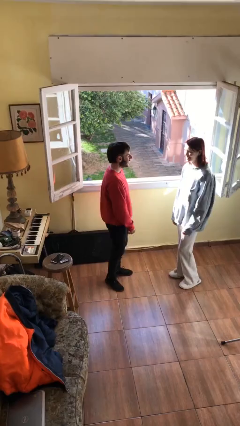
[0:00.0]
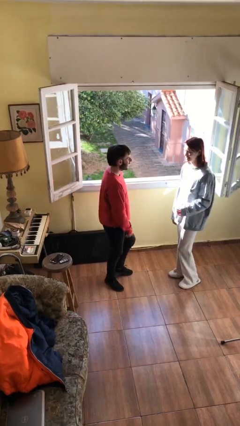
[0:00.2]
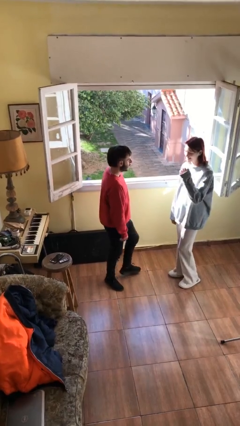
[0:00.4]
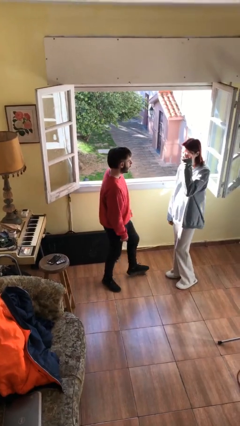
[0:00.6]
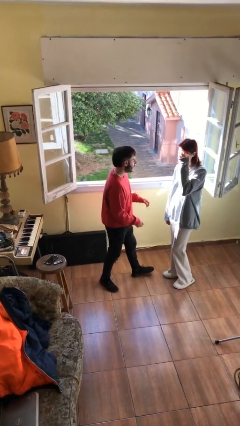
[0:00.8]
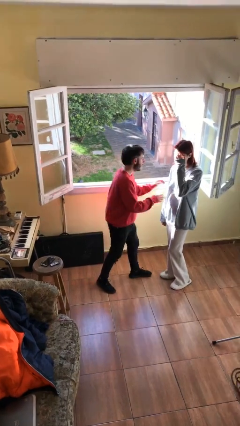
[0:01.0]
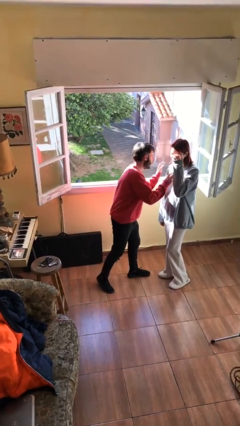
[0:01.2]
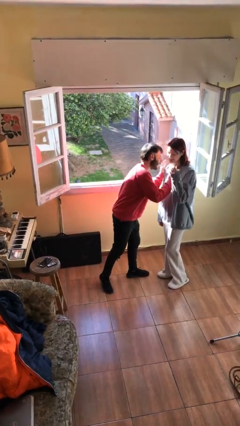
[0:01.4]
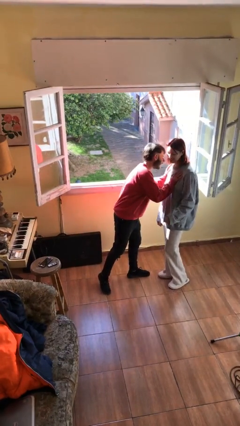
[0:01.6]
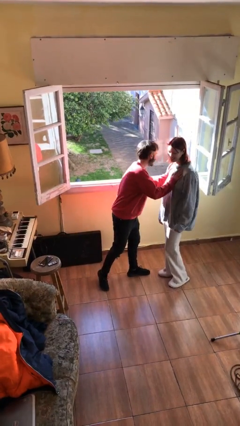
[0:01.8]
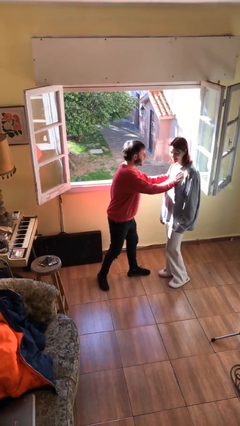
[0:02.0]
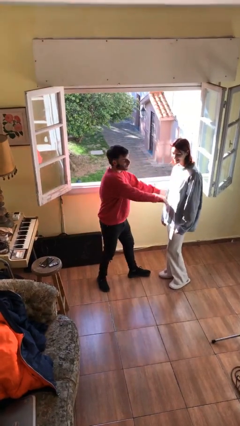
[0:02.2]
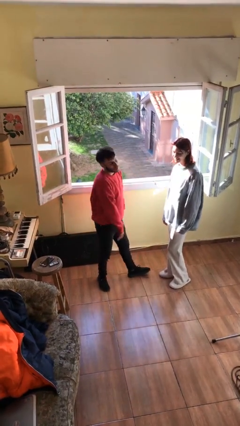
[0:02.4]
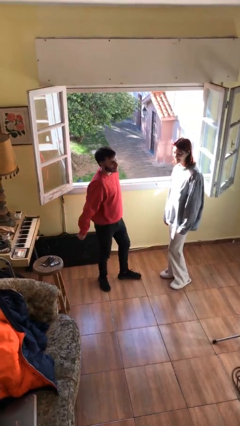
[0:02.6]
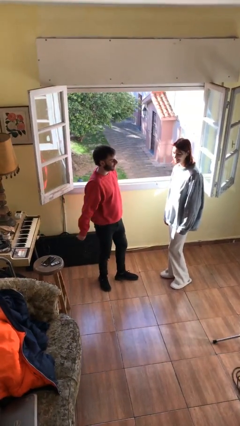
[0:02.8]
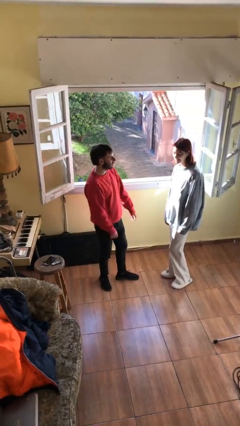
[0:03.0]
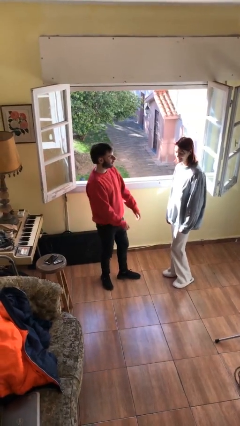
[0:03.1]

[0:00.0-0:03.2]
person shoves person

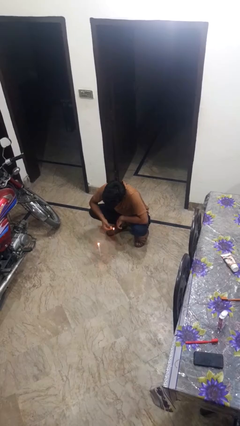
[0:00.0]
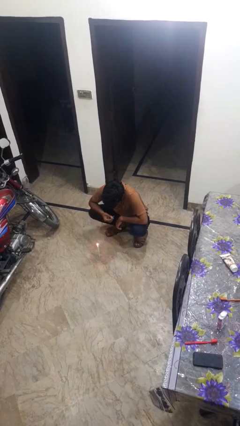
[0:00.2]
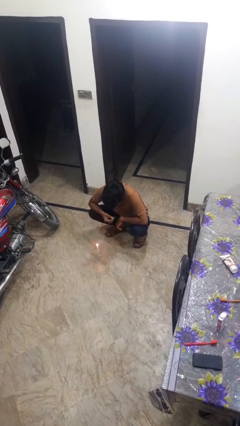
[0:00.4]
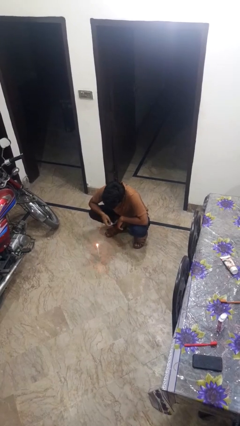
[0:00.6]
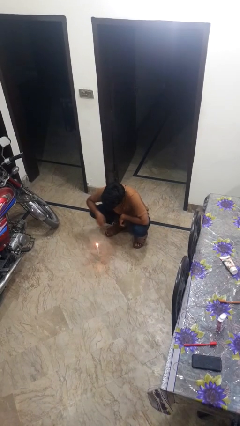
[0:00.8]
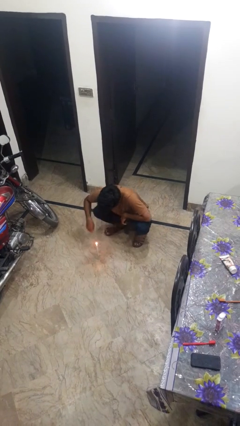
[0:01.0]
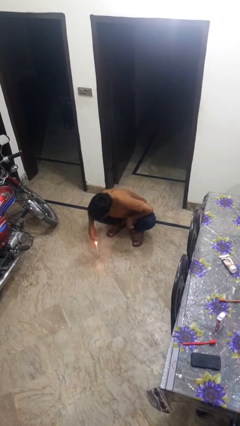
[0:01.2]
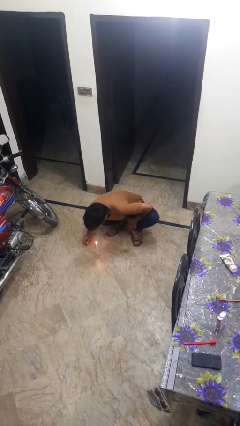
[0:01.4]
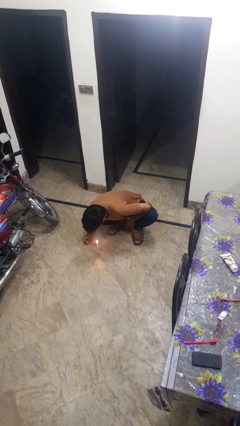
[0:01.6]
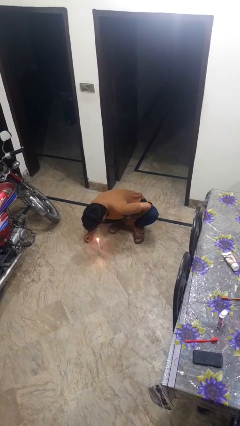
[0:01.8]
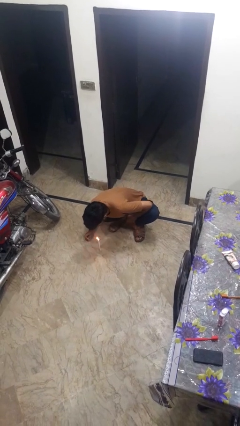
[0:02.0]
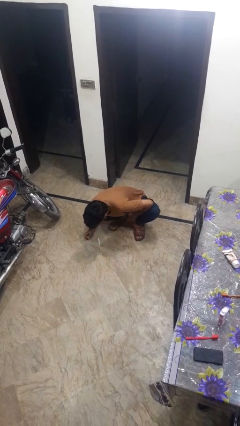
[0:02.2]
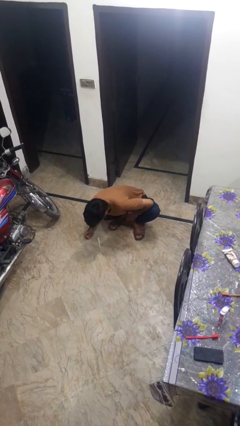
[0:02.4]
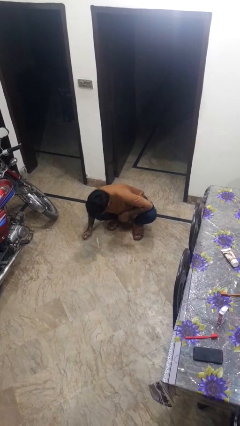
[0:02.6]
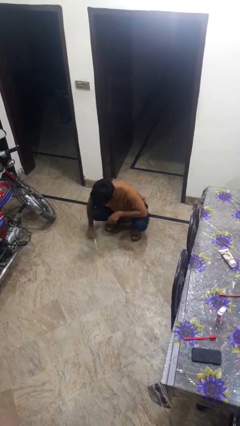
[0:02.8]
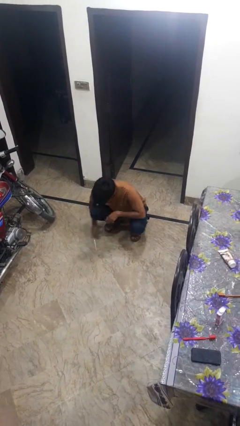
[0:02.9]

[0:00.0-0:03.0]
person extinguishes candle

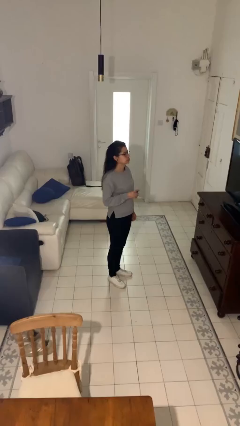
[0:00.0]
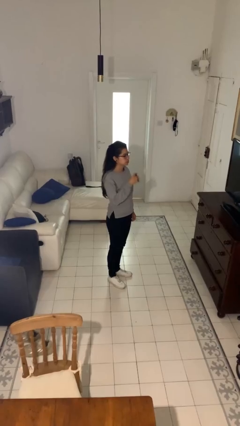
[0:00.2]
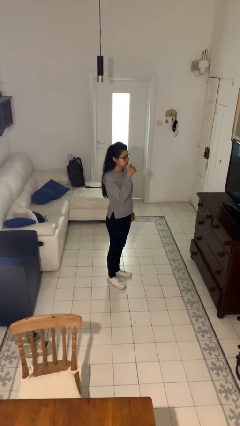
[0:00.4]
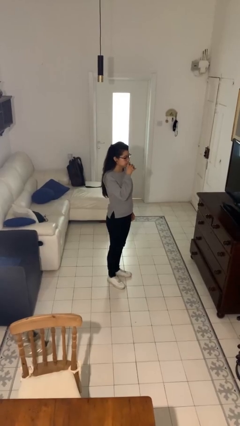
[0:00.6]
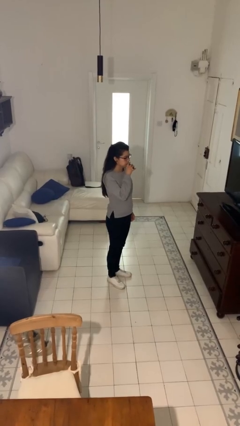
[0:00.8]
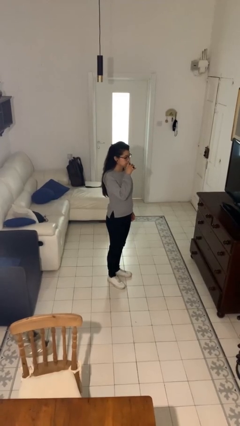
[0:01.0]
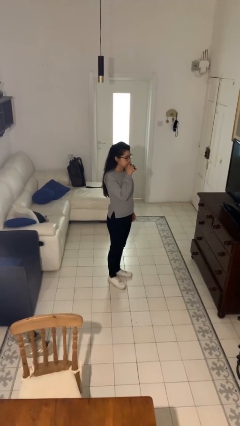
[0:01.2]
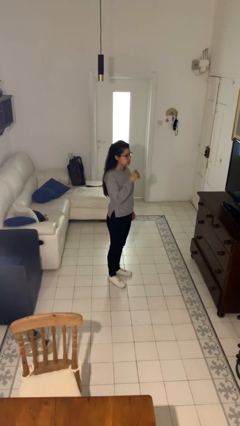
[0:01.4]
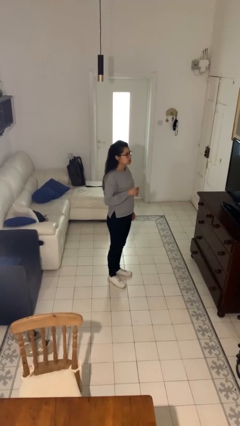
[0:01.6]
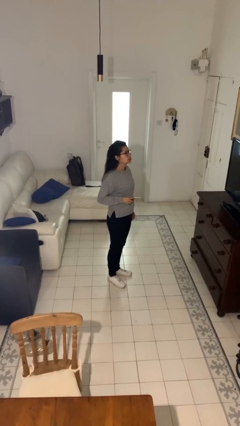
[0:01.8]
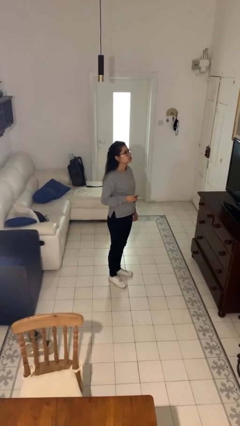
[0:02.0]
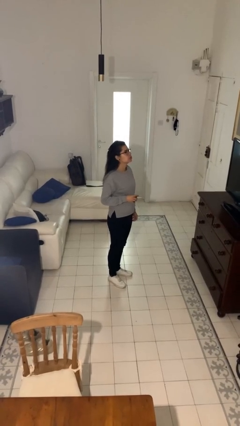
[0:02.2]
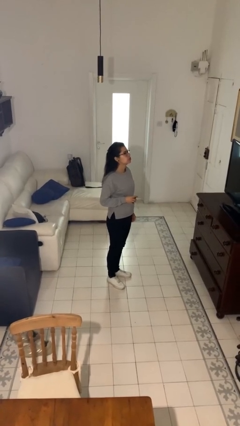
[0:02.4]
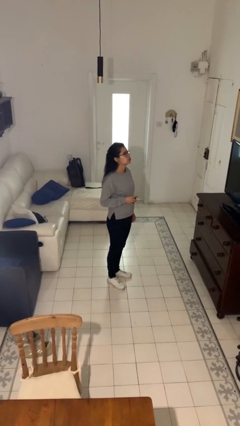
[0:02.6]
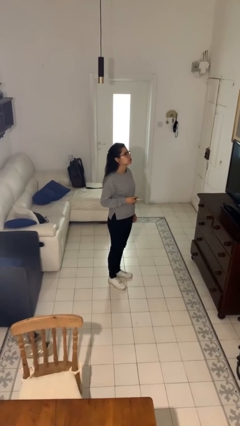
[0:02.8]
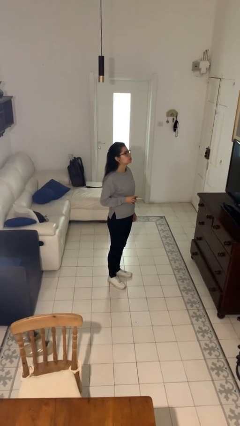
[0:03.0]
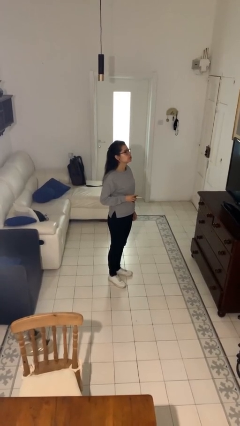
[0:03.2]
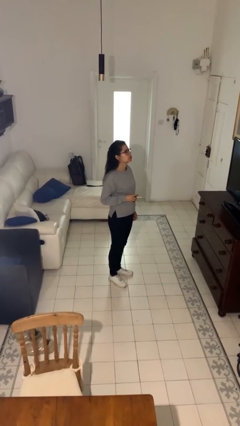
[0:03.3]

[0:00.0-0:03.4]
person vapes

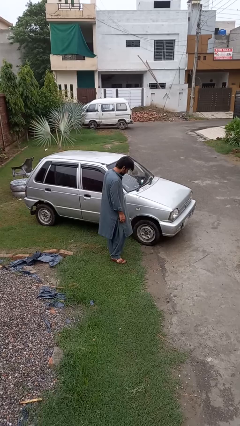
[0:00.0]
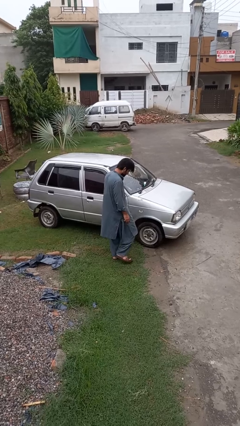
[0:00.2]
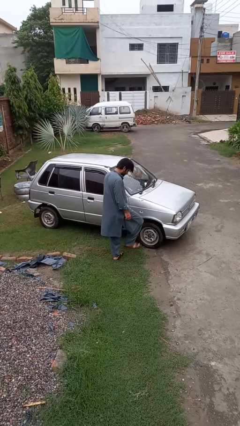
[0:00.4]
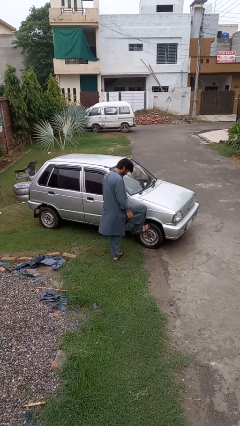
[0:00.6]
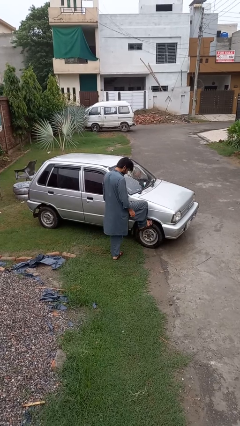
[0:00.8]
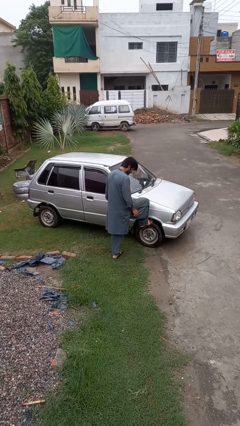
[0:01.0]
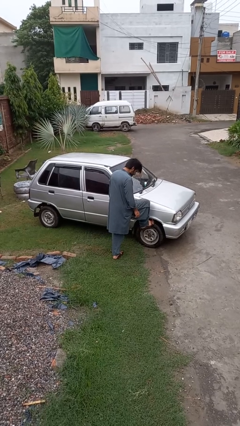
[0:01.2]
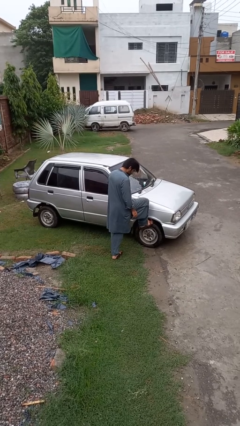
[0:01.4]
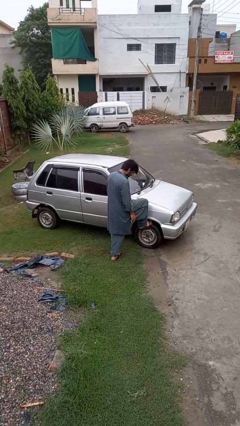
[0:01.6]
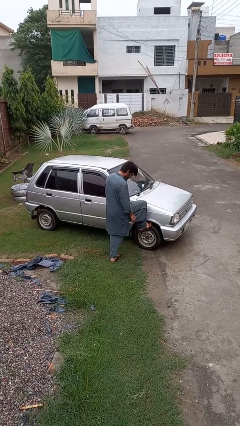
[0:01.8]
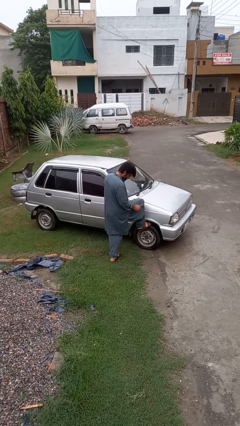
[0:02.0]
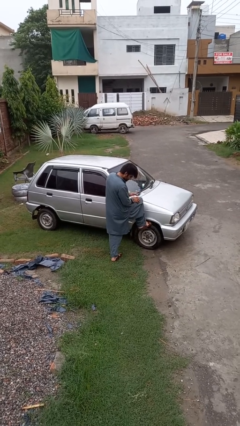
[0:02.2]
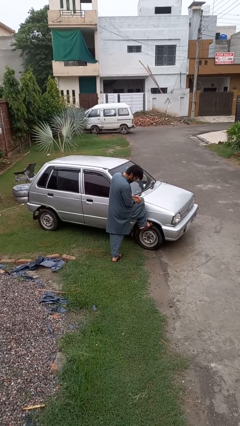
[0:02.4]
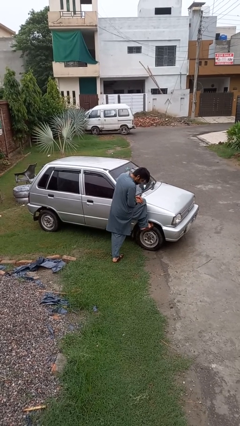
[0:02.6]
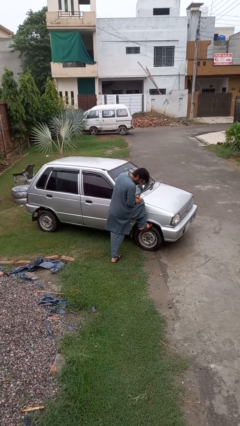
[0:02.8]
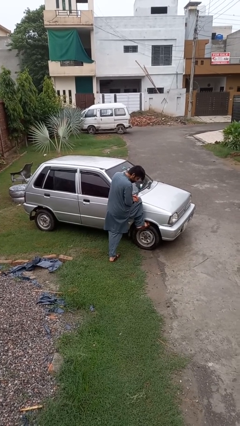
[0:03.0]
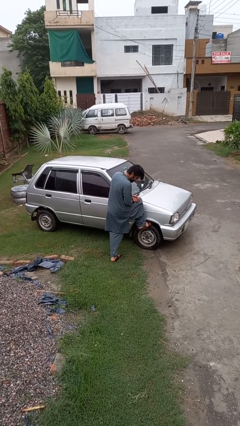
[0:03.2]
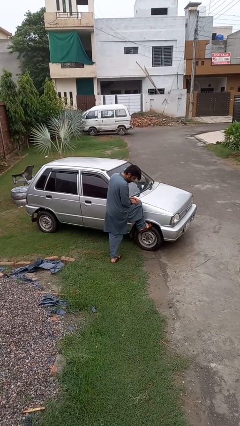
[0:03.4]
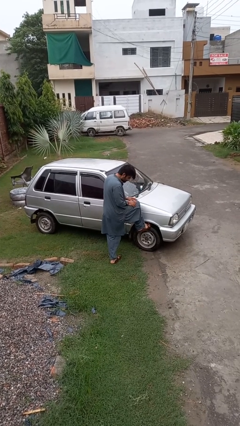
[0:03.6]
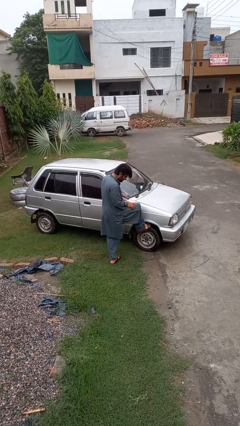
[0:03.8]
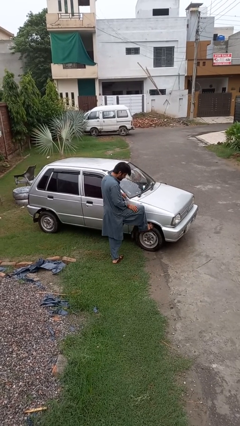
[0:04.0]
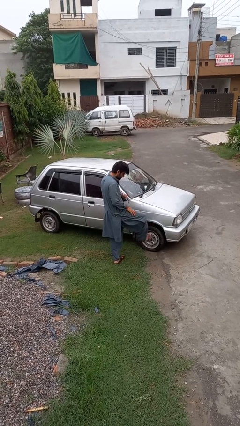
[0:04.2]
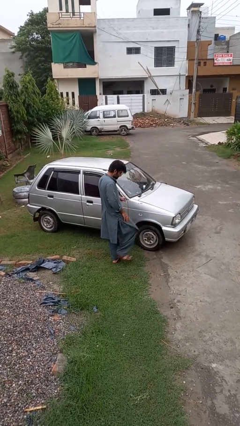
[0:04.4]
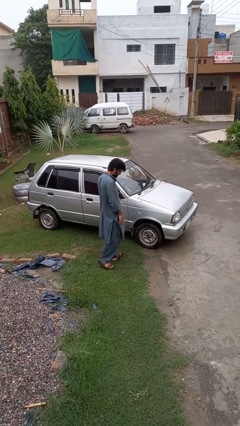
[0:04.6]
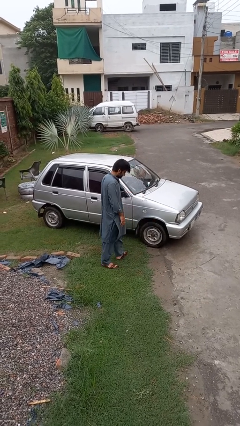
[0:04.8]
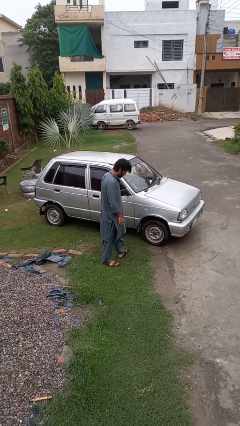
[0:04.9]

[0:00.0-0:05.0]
person kicks car tires

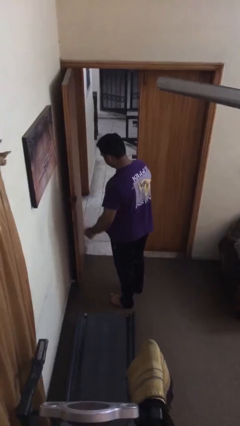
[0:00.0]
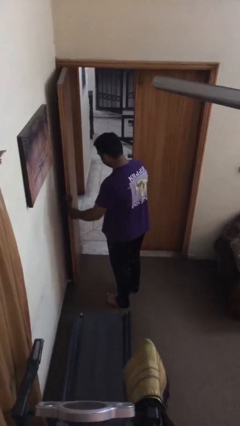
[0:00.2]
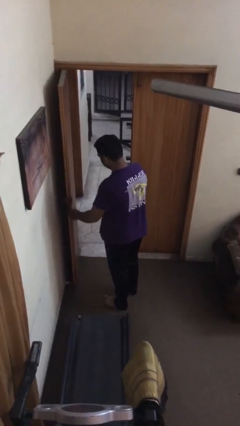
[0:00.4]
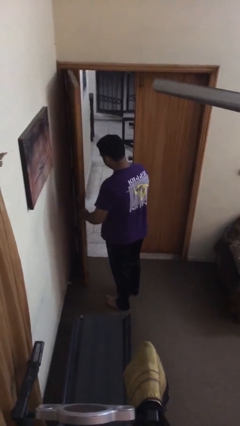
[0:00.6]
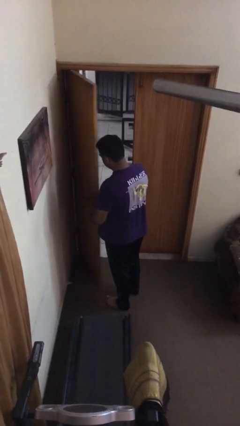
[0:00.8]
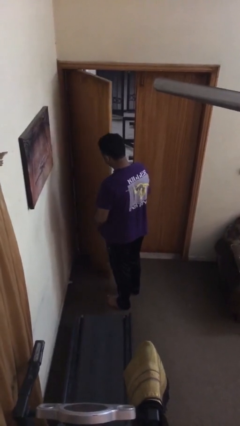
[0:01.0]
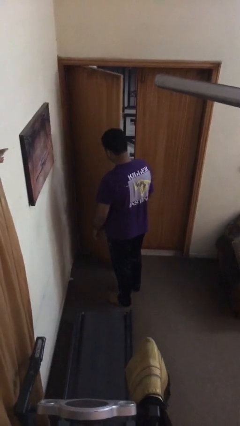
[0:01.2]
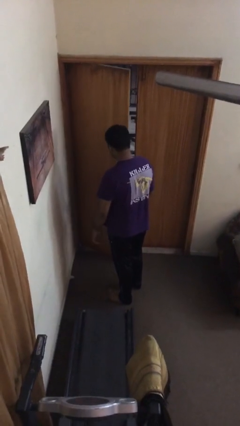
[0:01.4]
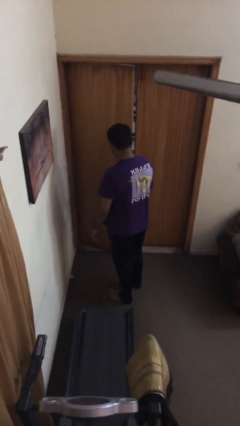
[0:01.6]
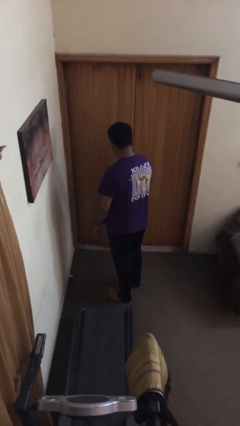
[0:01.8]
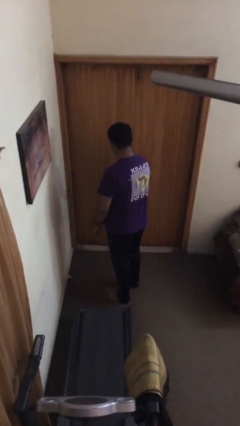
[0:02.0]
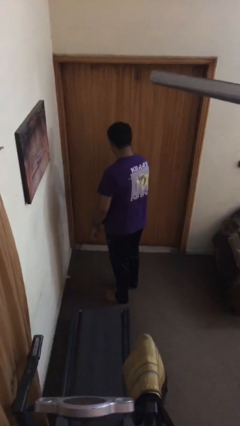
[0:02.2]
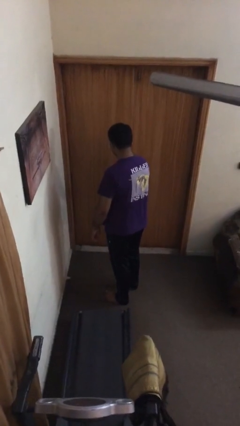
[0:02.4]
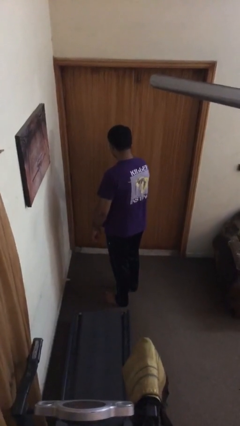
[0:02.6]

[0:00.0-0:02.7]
person closes facility door

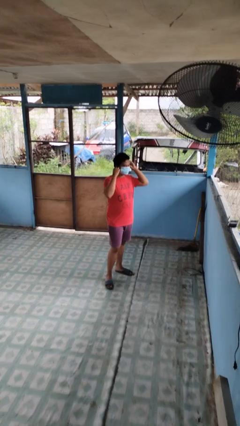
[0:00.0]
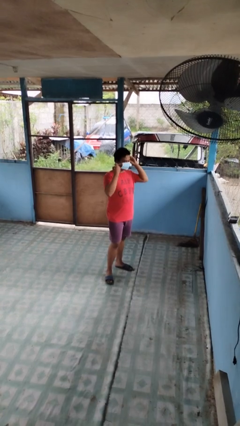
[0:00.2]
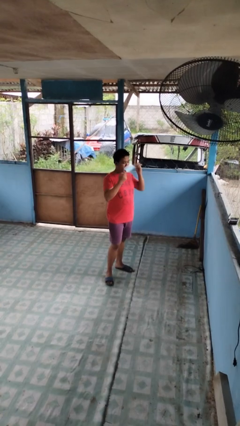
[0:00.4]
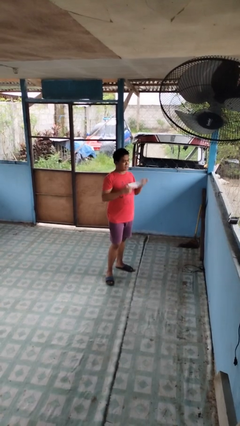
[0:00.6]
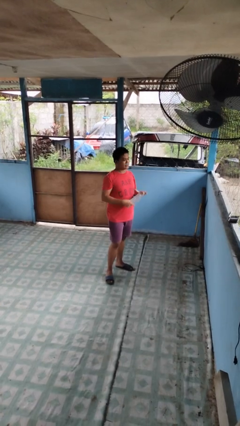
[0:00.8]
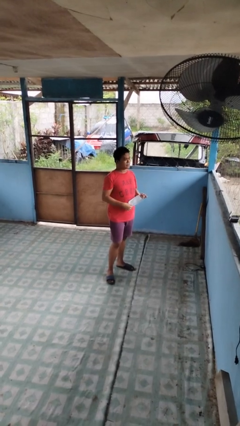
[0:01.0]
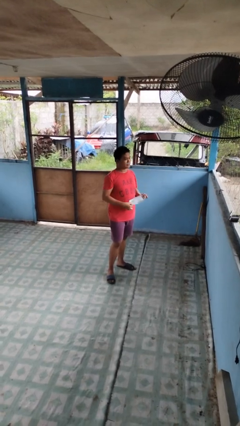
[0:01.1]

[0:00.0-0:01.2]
person takes off facemask
